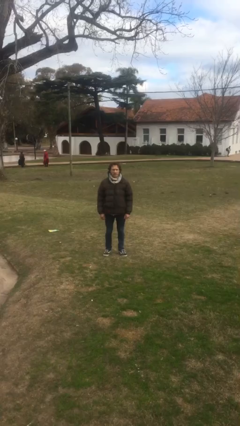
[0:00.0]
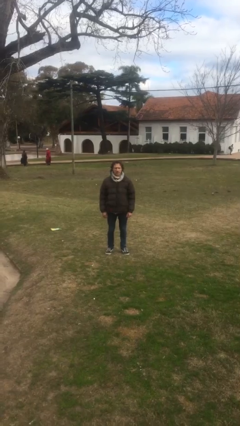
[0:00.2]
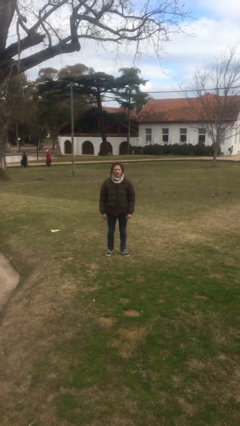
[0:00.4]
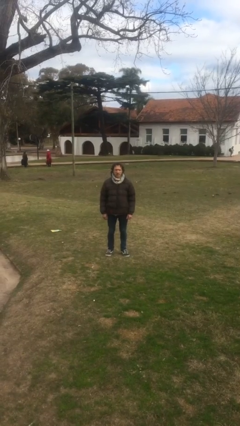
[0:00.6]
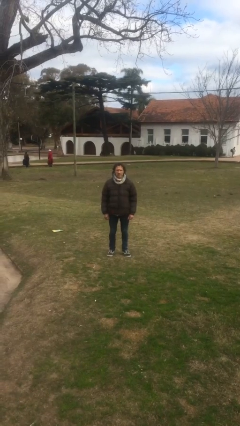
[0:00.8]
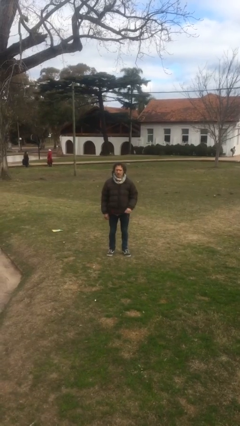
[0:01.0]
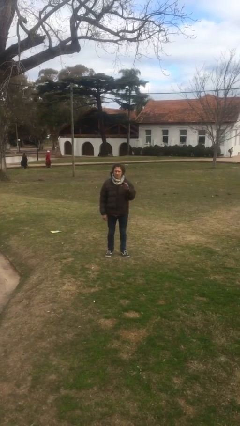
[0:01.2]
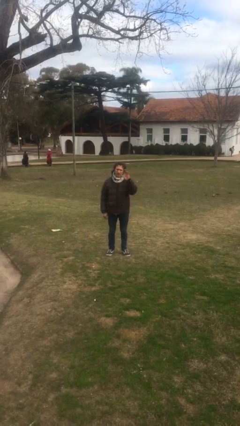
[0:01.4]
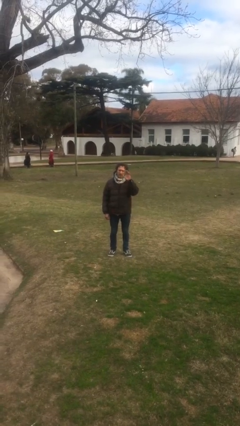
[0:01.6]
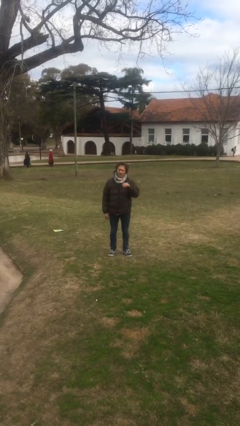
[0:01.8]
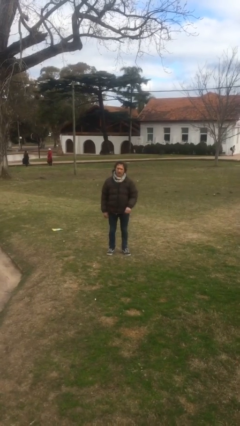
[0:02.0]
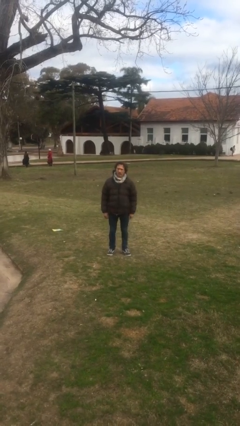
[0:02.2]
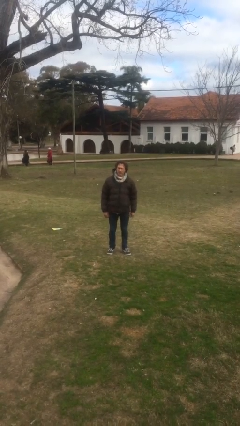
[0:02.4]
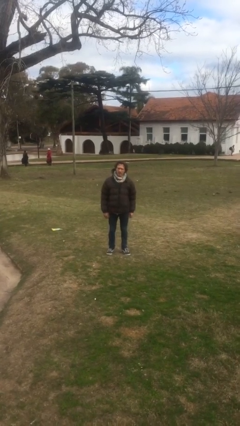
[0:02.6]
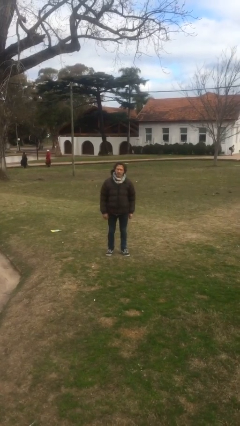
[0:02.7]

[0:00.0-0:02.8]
person waves at person

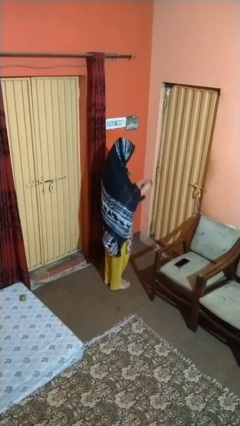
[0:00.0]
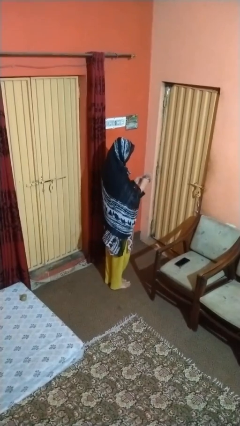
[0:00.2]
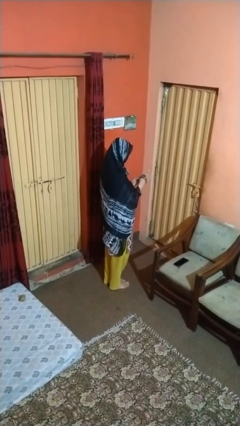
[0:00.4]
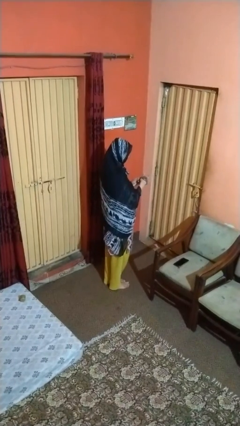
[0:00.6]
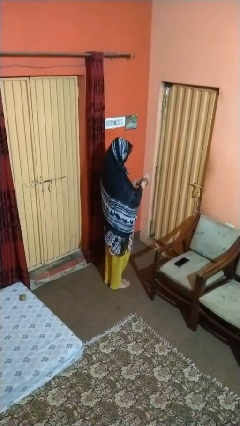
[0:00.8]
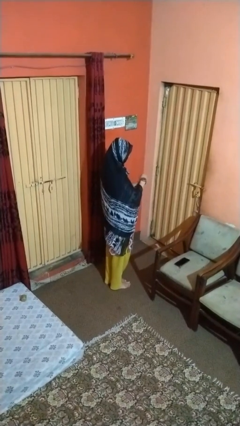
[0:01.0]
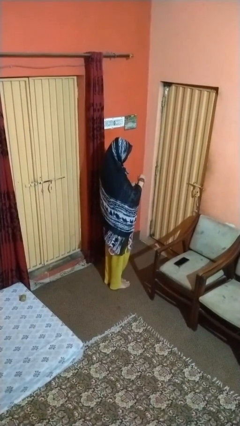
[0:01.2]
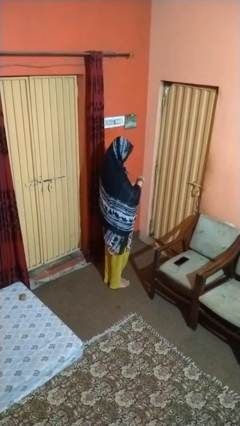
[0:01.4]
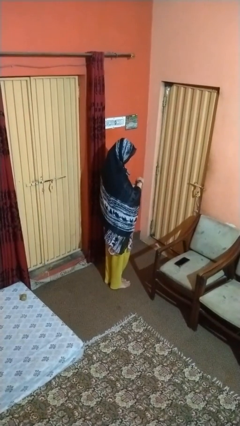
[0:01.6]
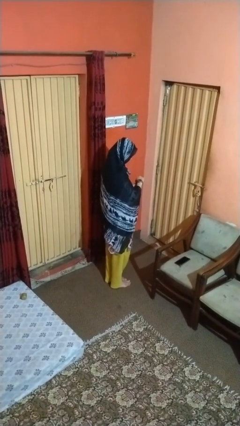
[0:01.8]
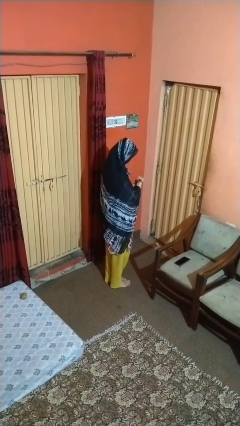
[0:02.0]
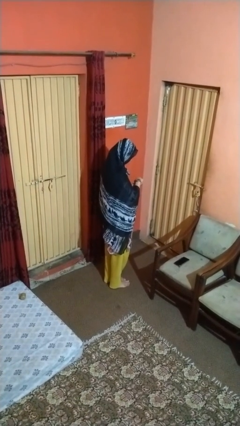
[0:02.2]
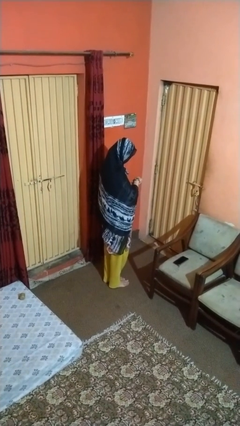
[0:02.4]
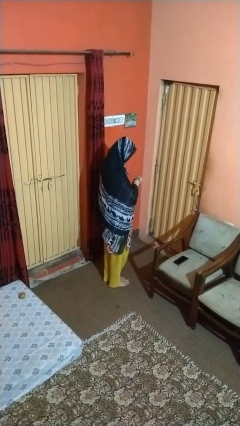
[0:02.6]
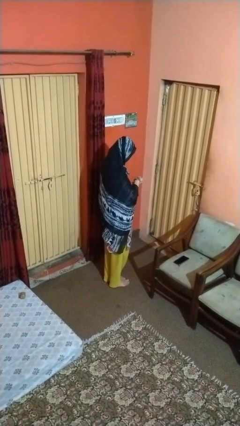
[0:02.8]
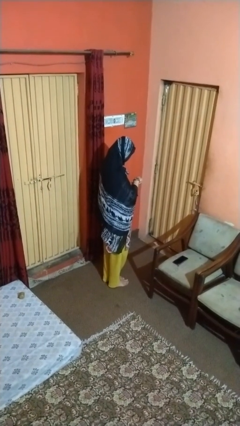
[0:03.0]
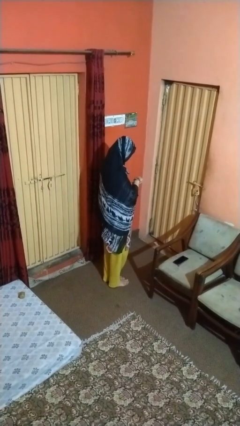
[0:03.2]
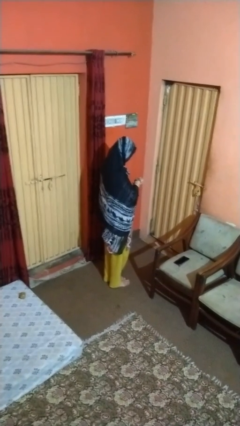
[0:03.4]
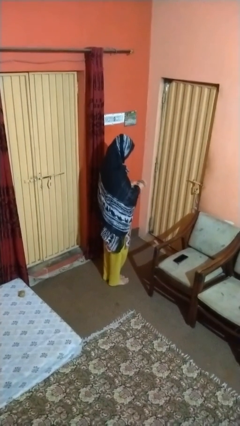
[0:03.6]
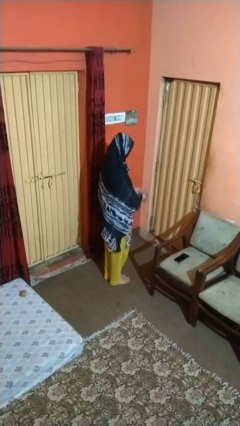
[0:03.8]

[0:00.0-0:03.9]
person puts on wristwatch

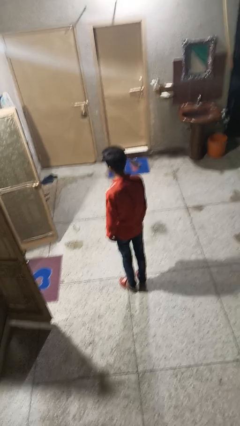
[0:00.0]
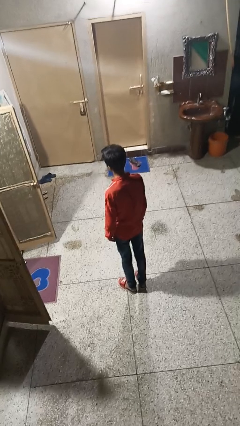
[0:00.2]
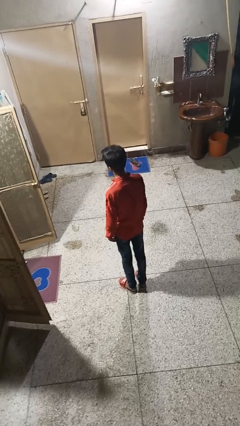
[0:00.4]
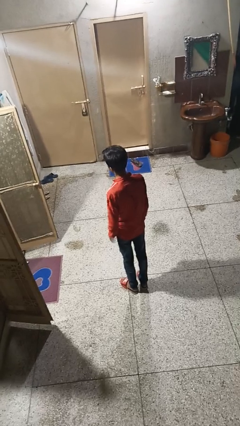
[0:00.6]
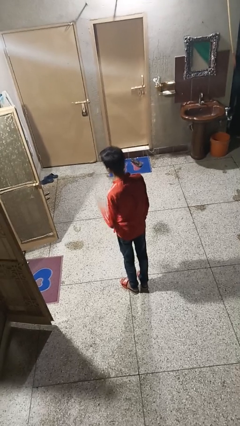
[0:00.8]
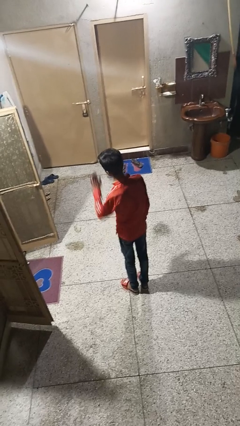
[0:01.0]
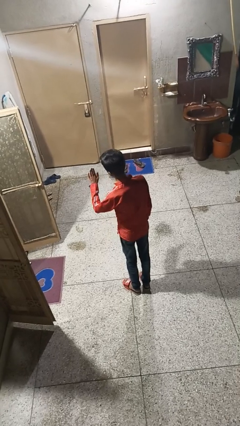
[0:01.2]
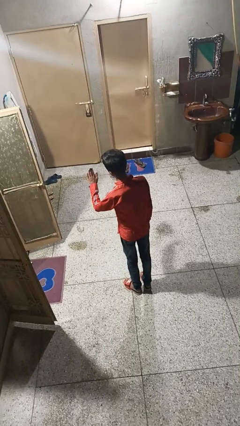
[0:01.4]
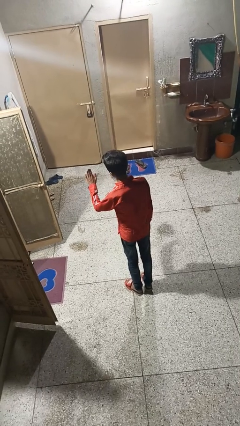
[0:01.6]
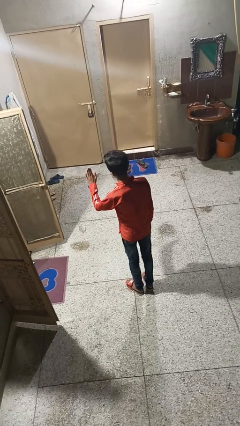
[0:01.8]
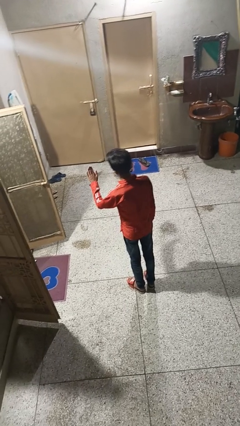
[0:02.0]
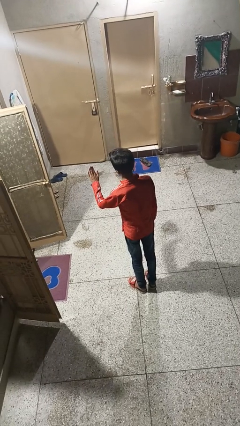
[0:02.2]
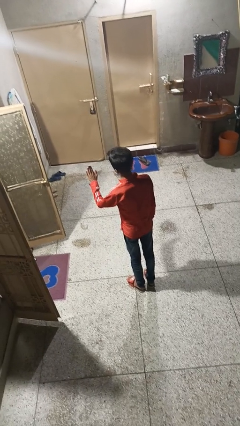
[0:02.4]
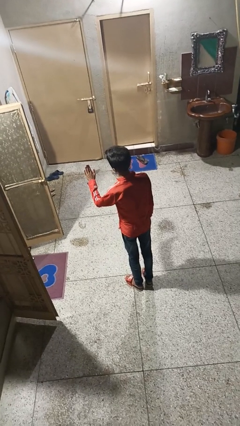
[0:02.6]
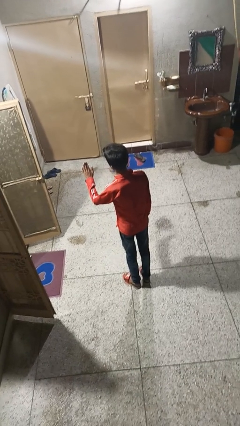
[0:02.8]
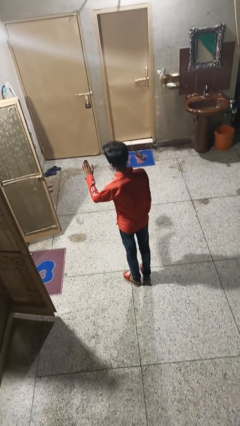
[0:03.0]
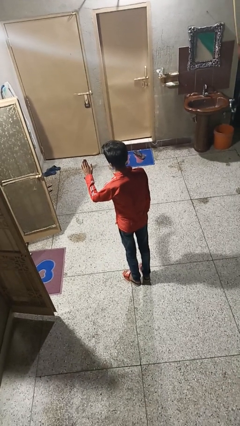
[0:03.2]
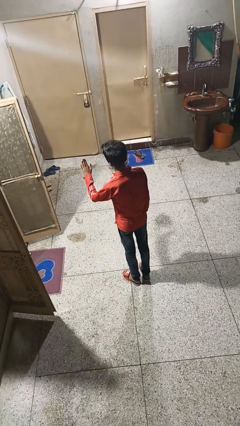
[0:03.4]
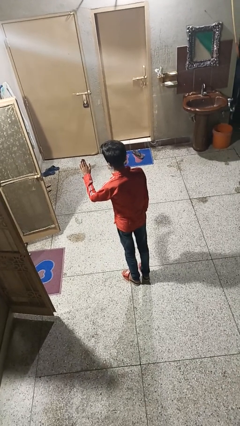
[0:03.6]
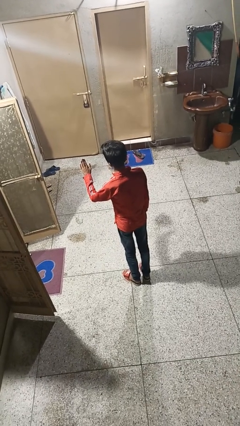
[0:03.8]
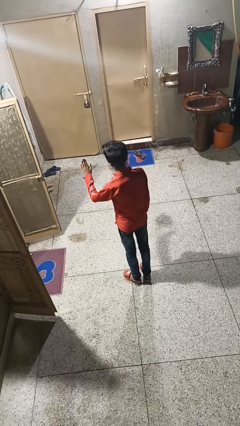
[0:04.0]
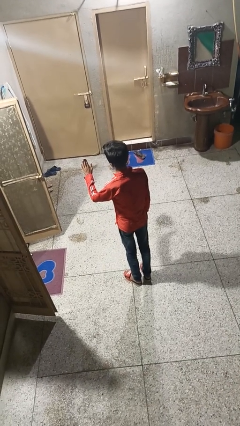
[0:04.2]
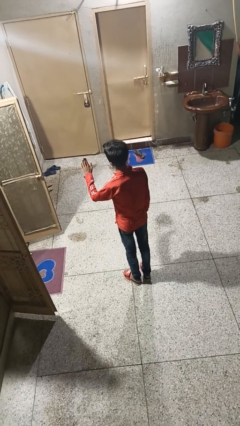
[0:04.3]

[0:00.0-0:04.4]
person gestures stop

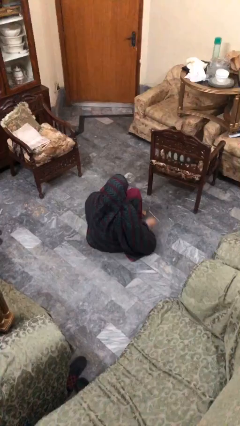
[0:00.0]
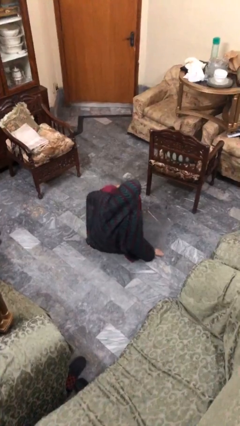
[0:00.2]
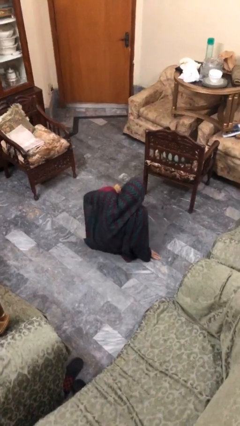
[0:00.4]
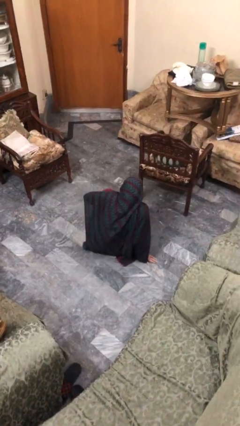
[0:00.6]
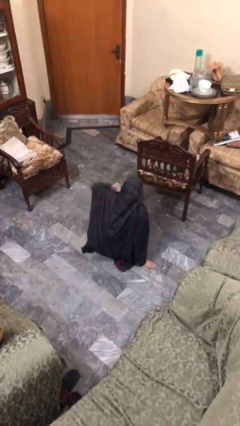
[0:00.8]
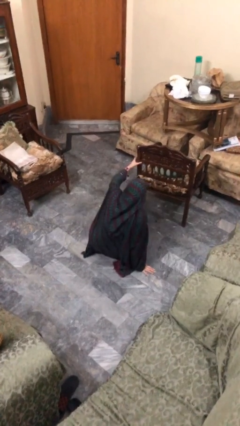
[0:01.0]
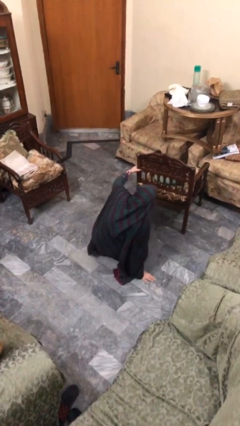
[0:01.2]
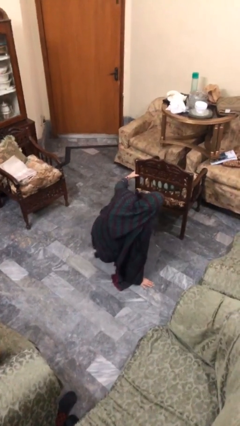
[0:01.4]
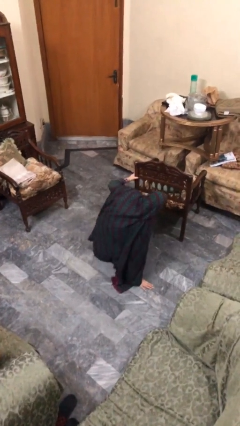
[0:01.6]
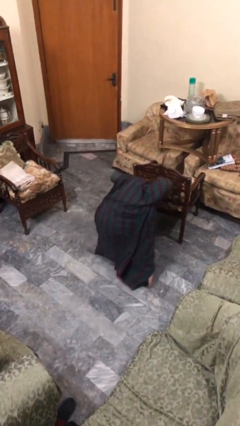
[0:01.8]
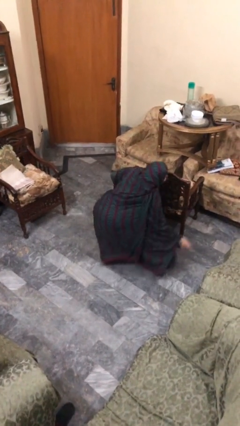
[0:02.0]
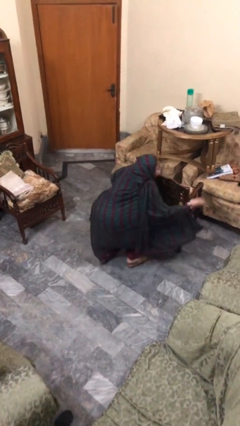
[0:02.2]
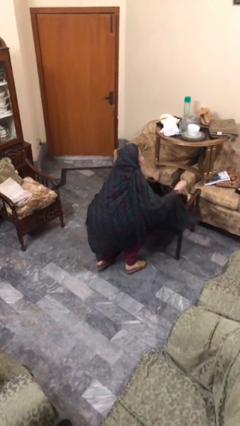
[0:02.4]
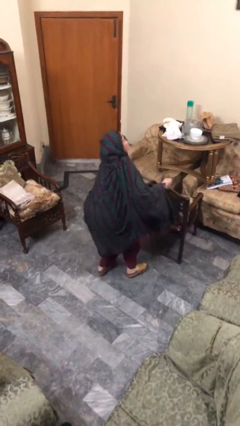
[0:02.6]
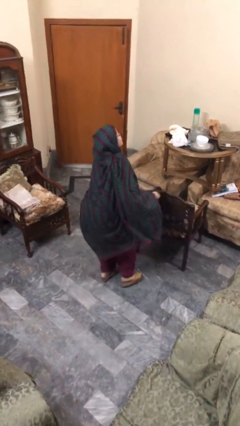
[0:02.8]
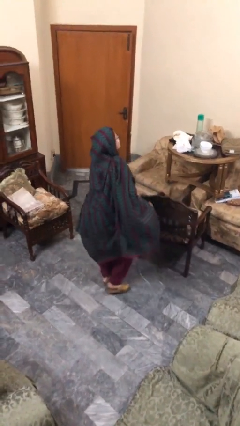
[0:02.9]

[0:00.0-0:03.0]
person stands up from floor

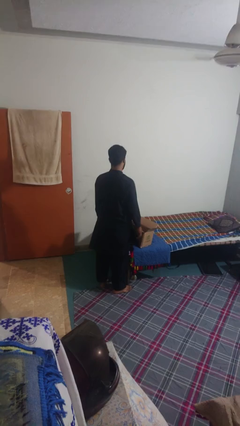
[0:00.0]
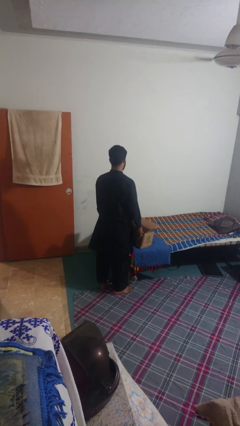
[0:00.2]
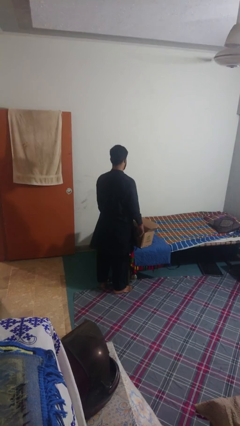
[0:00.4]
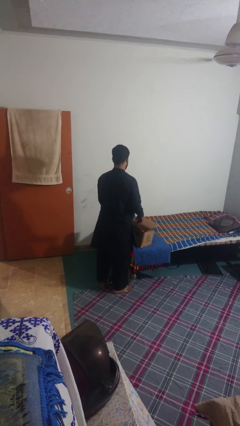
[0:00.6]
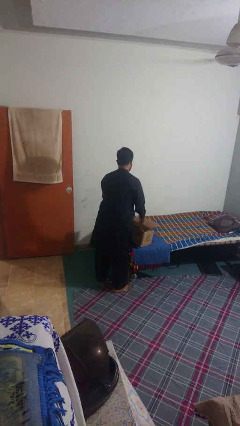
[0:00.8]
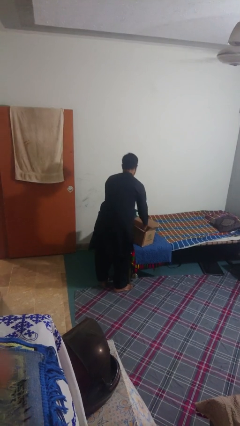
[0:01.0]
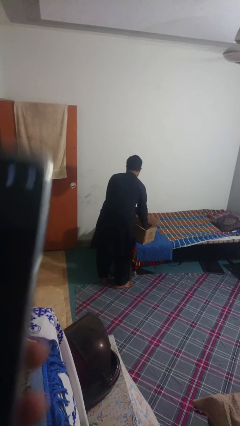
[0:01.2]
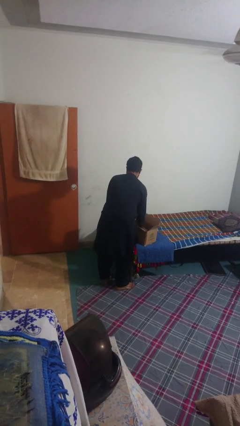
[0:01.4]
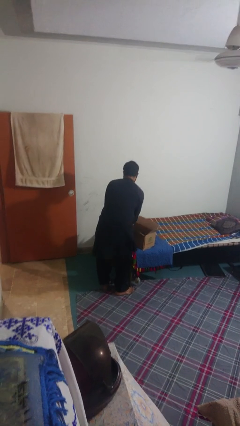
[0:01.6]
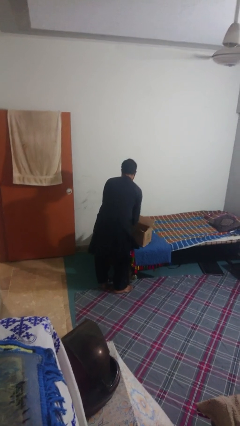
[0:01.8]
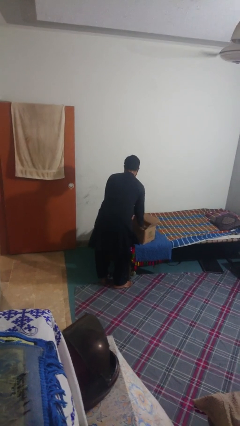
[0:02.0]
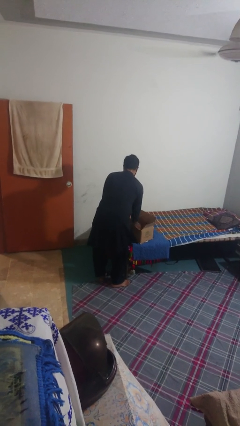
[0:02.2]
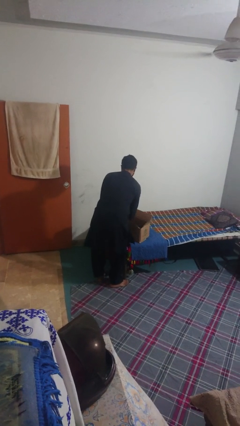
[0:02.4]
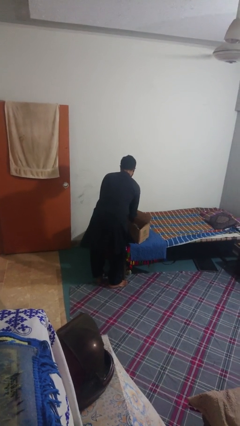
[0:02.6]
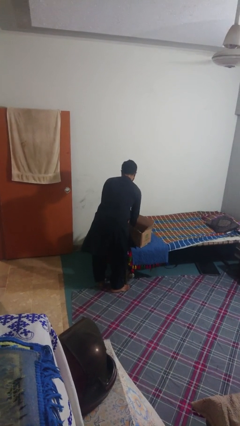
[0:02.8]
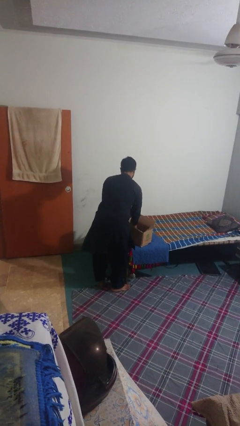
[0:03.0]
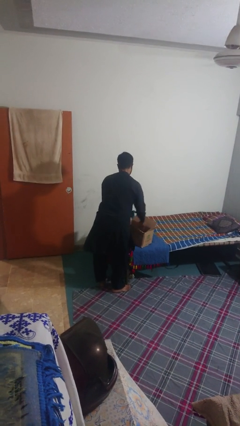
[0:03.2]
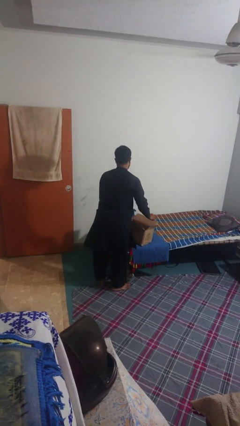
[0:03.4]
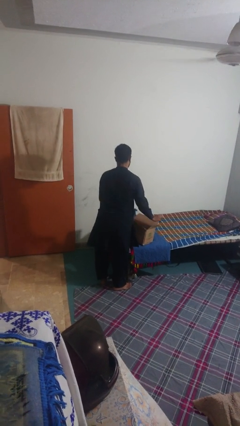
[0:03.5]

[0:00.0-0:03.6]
person searches in box
